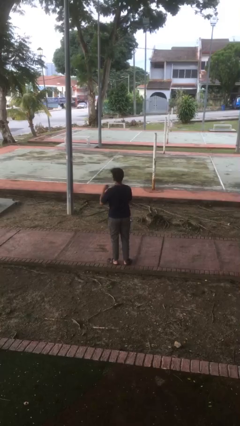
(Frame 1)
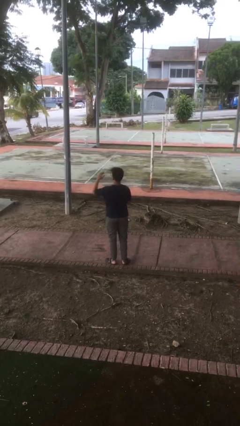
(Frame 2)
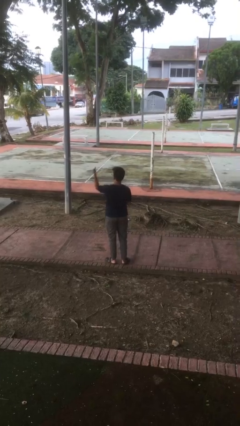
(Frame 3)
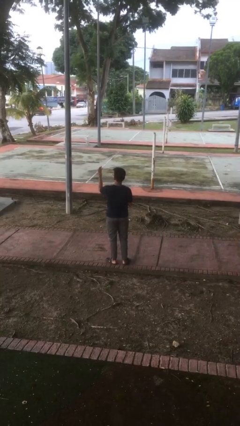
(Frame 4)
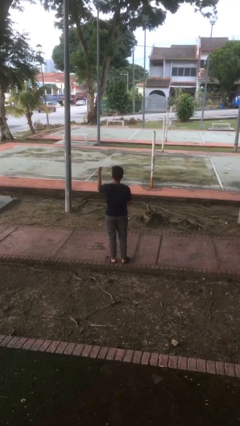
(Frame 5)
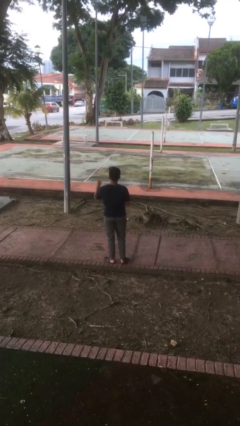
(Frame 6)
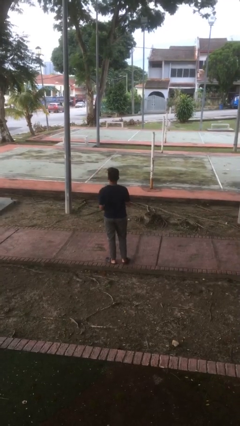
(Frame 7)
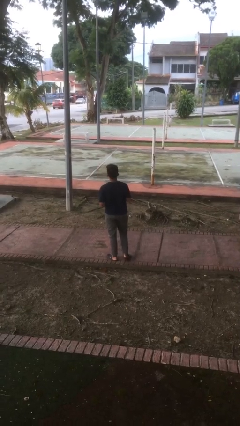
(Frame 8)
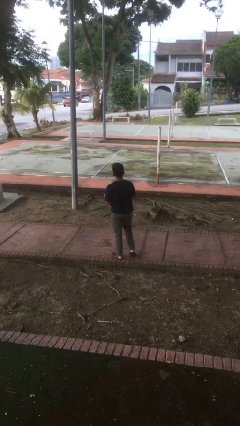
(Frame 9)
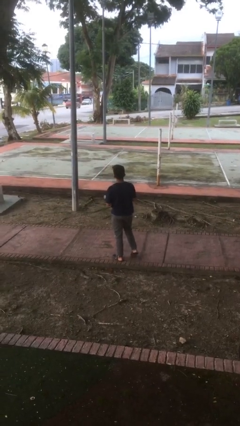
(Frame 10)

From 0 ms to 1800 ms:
person karate chop

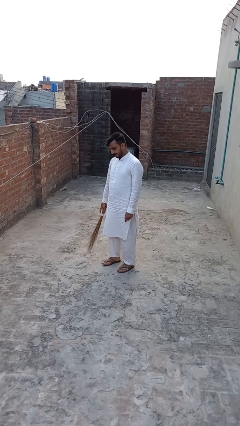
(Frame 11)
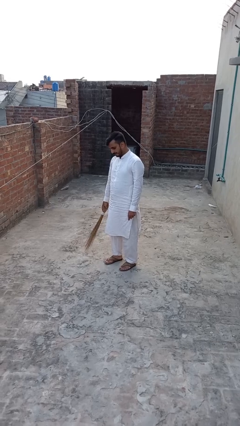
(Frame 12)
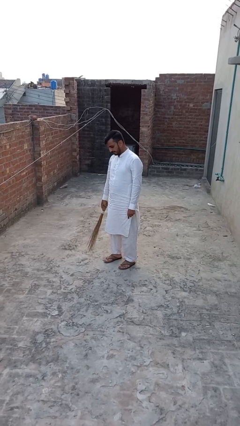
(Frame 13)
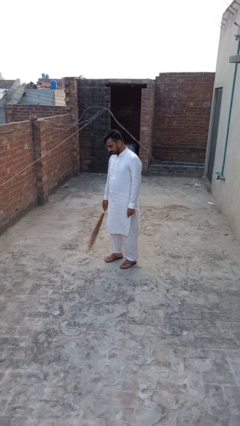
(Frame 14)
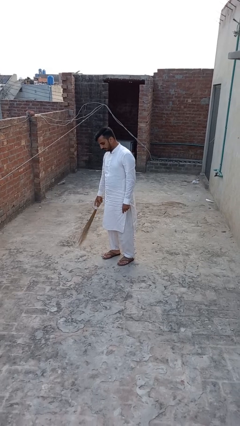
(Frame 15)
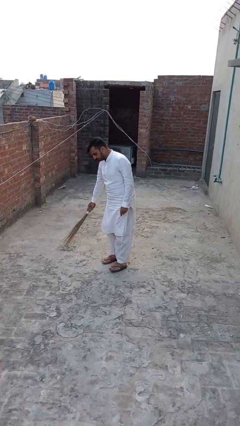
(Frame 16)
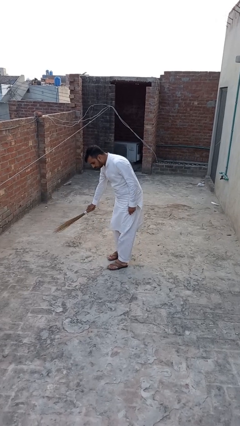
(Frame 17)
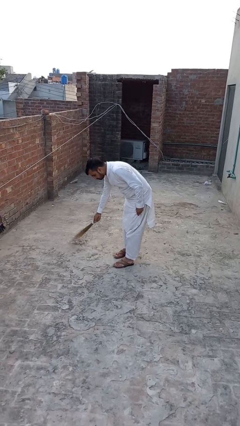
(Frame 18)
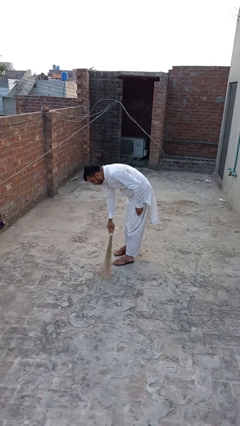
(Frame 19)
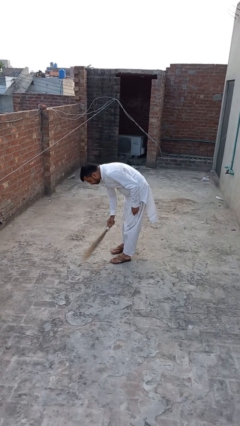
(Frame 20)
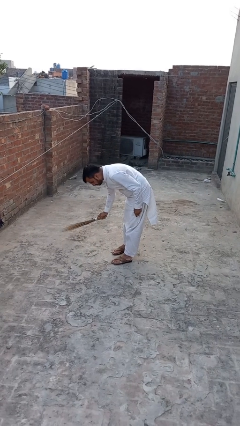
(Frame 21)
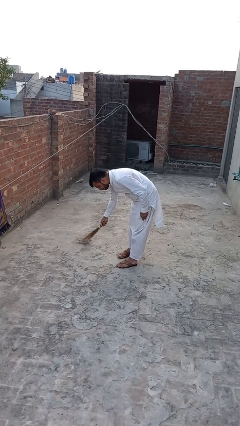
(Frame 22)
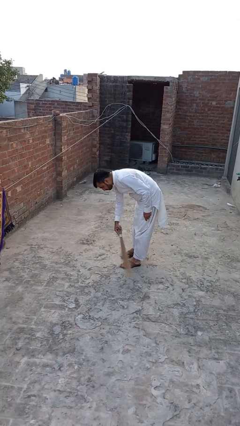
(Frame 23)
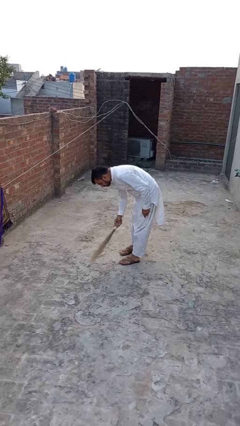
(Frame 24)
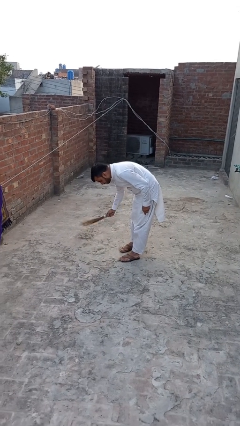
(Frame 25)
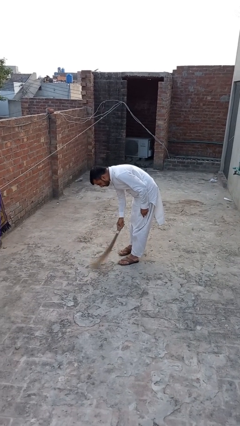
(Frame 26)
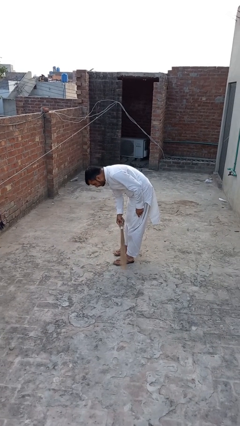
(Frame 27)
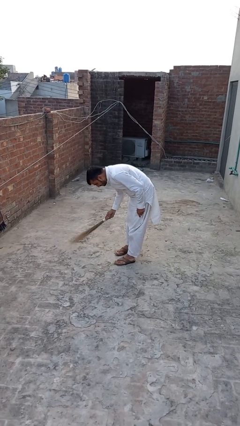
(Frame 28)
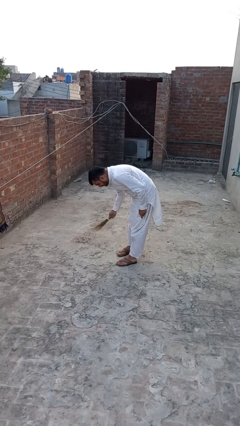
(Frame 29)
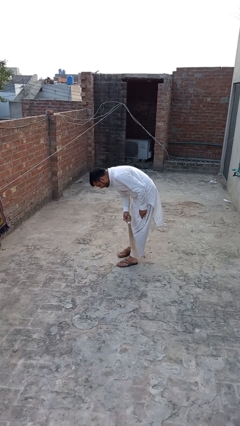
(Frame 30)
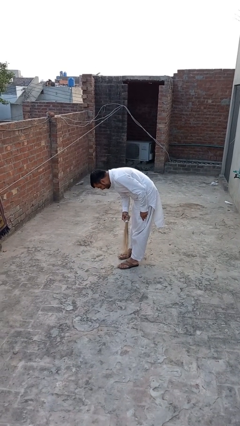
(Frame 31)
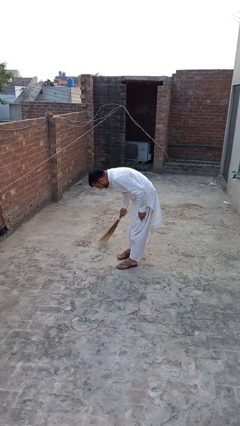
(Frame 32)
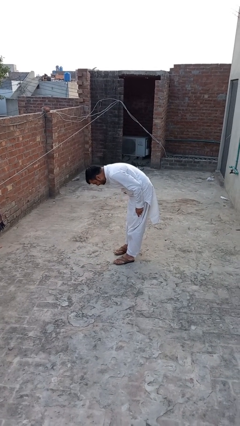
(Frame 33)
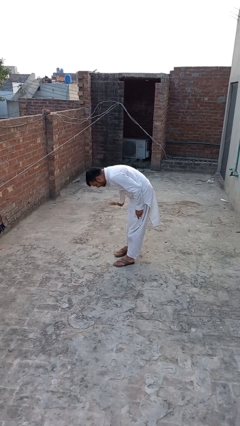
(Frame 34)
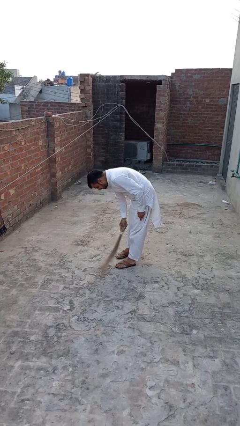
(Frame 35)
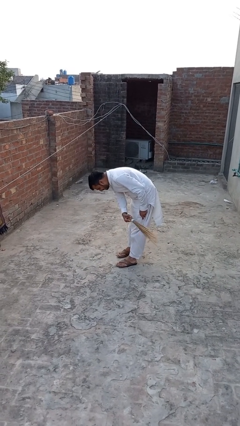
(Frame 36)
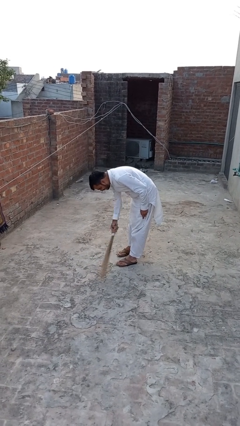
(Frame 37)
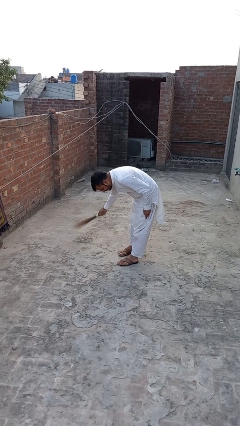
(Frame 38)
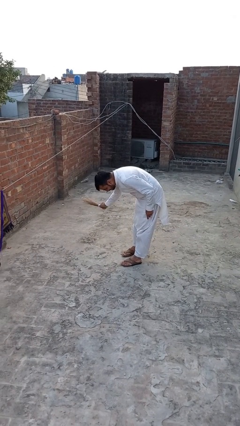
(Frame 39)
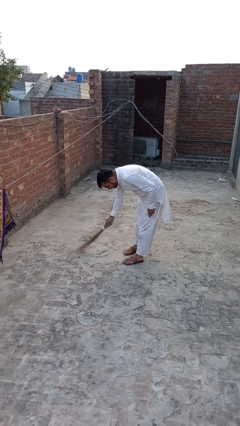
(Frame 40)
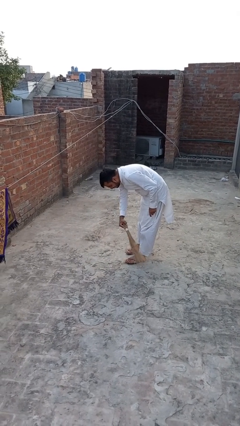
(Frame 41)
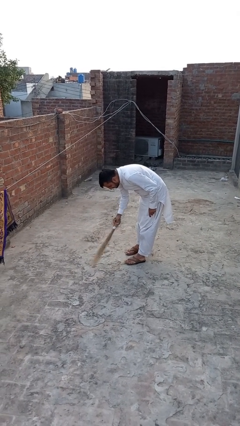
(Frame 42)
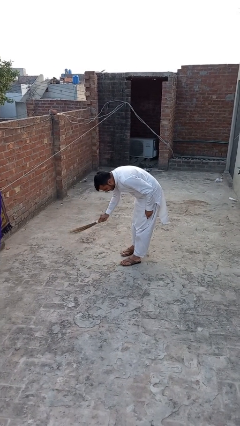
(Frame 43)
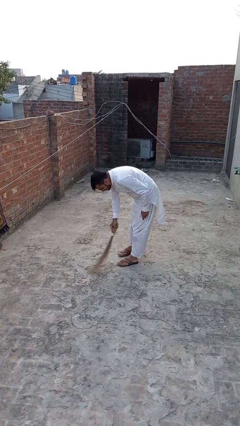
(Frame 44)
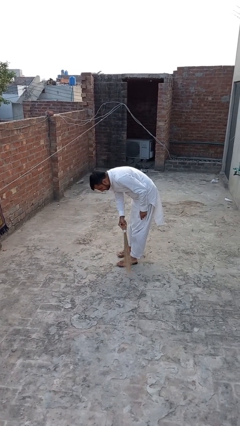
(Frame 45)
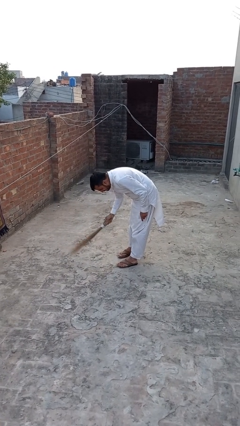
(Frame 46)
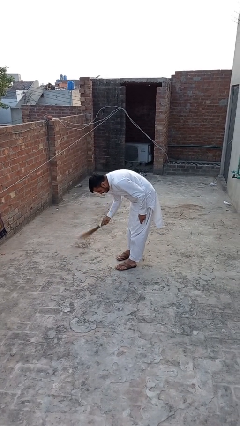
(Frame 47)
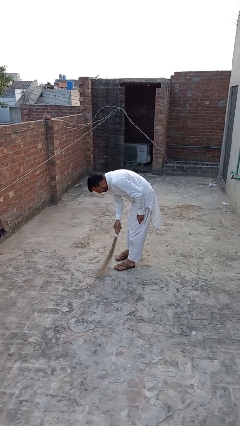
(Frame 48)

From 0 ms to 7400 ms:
person sweeps floor

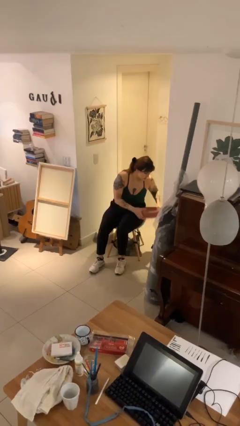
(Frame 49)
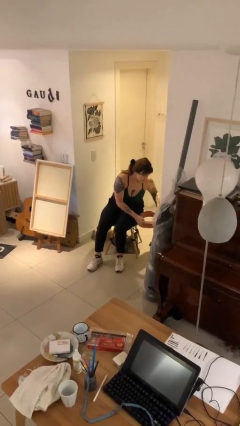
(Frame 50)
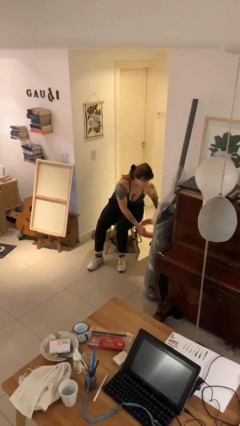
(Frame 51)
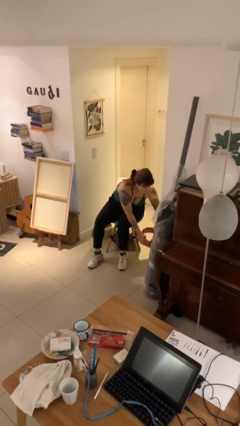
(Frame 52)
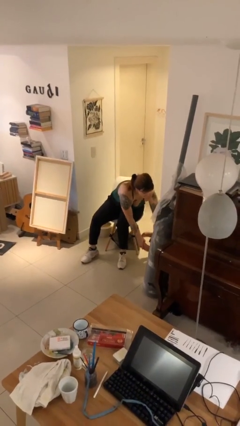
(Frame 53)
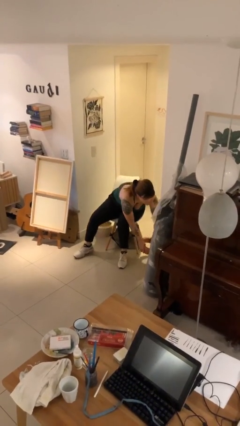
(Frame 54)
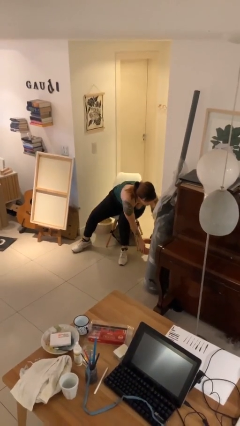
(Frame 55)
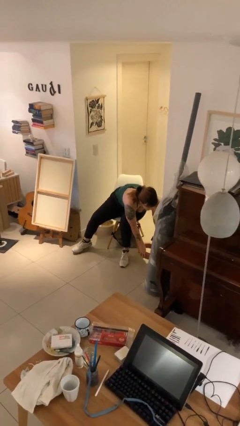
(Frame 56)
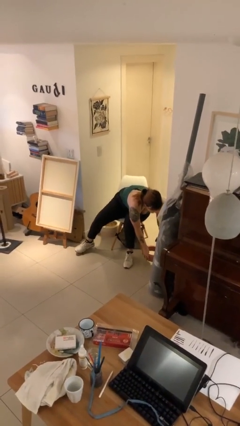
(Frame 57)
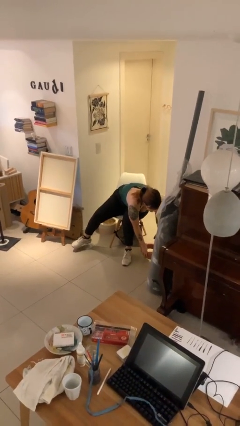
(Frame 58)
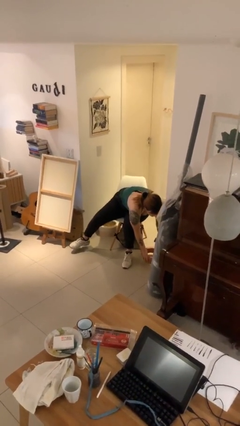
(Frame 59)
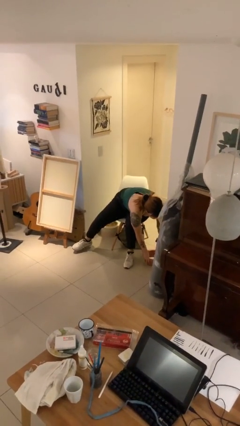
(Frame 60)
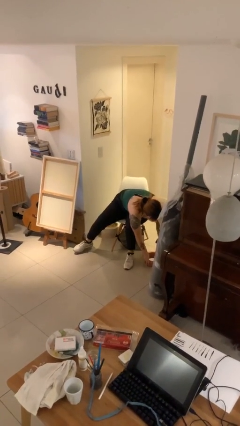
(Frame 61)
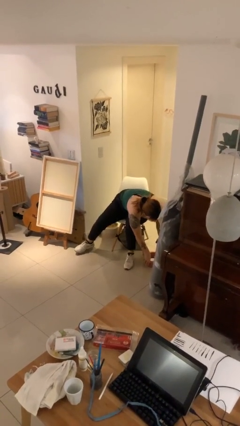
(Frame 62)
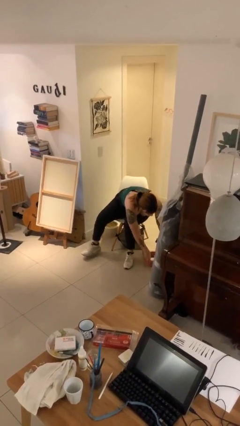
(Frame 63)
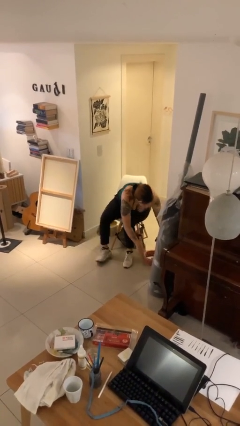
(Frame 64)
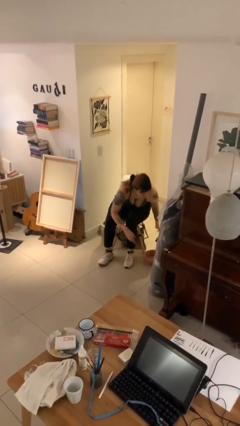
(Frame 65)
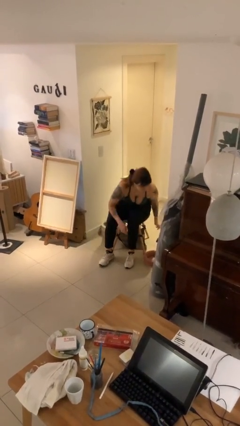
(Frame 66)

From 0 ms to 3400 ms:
person puts down object on floor

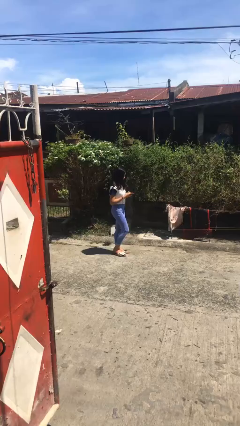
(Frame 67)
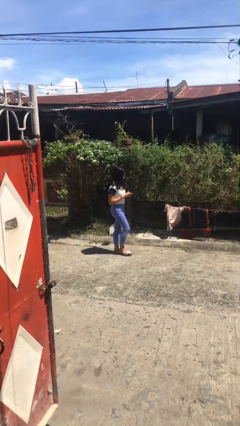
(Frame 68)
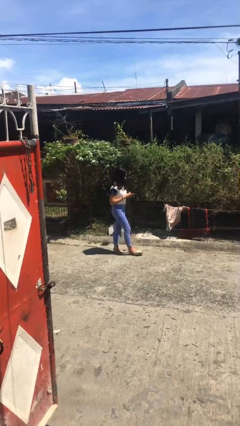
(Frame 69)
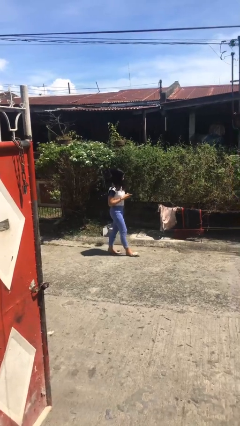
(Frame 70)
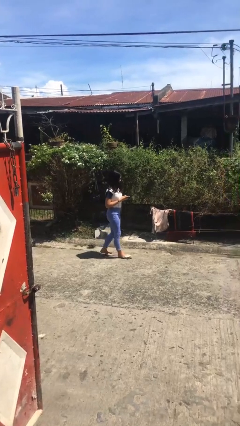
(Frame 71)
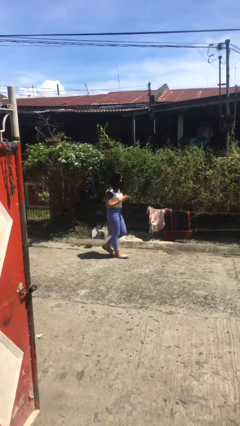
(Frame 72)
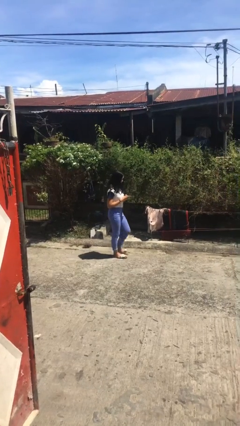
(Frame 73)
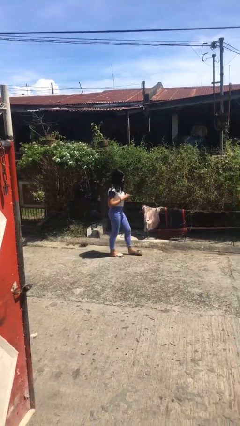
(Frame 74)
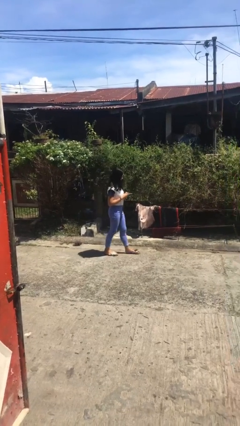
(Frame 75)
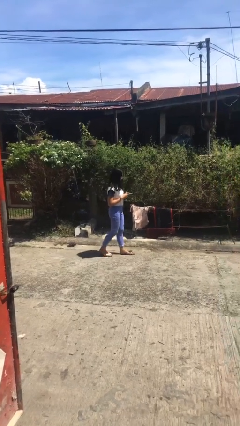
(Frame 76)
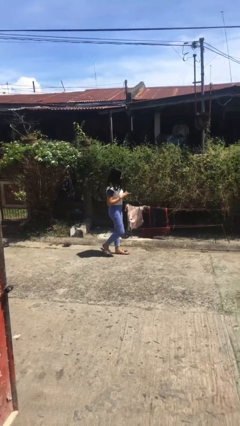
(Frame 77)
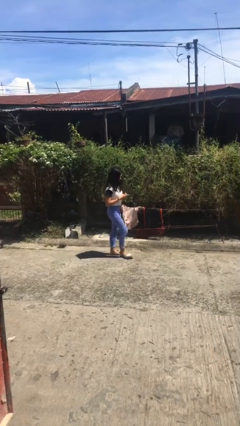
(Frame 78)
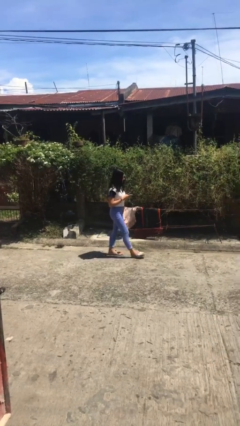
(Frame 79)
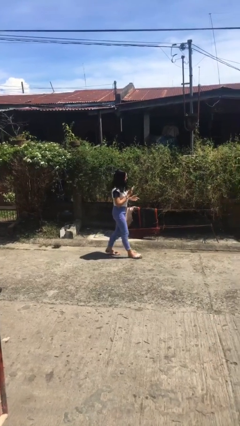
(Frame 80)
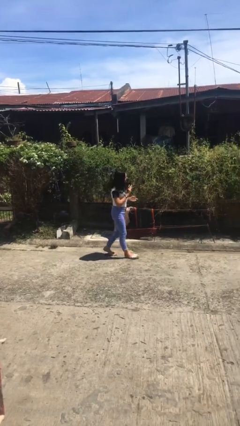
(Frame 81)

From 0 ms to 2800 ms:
person texts on phone

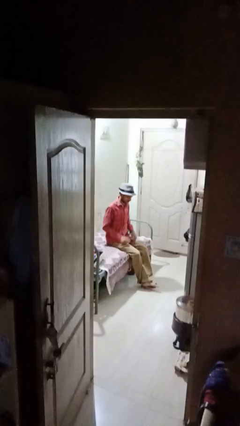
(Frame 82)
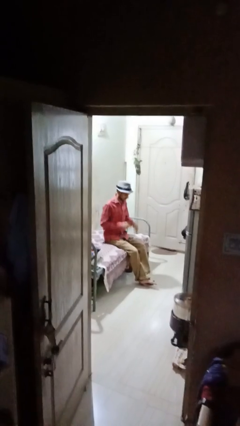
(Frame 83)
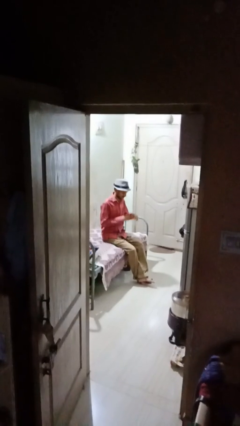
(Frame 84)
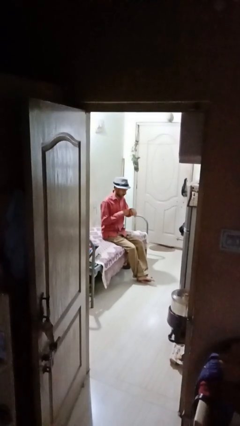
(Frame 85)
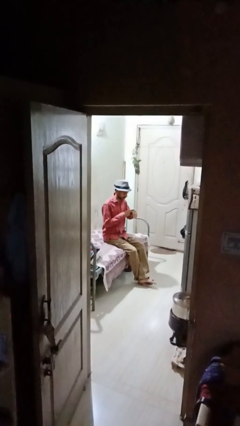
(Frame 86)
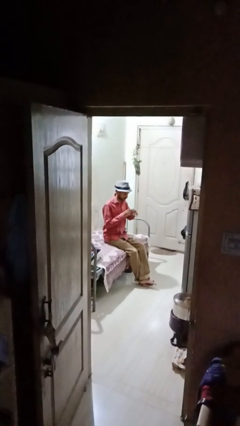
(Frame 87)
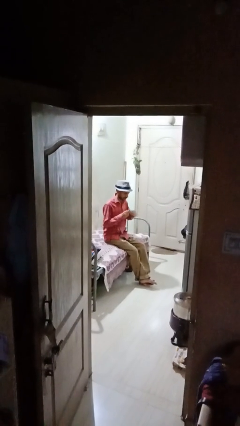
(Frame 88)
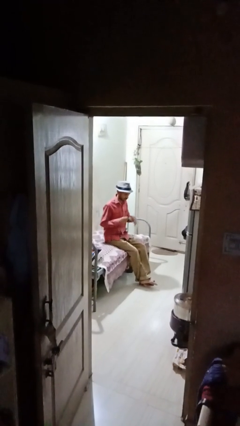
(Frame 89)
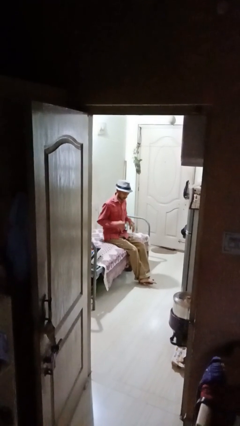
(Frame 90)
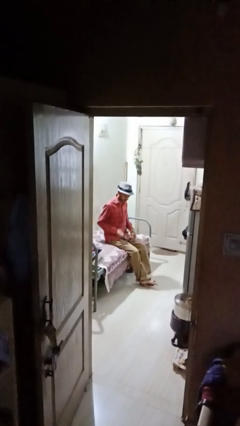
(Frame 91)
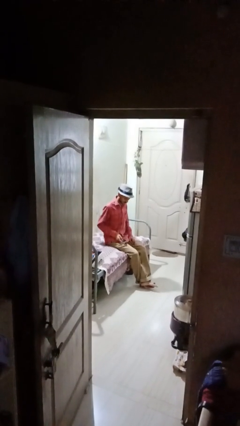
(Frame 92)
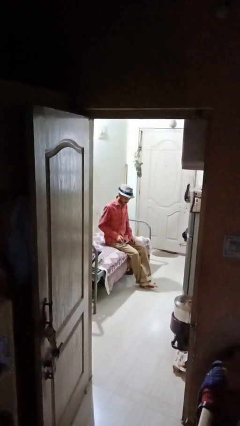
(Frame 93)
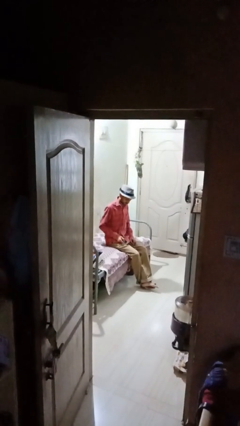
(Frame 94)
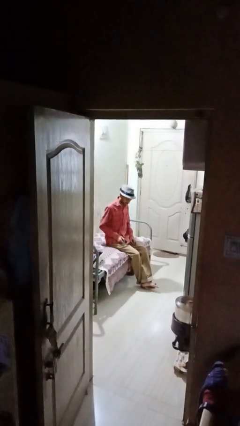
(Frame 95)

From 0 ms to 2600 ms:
person takes off wristwatch
